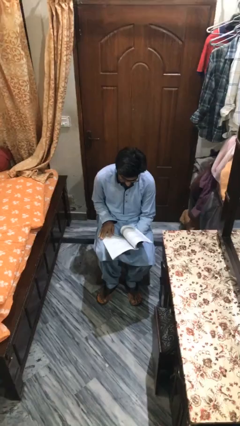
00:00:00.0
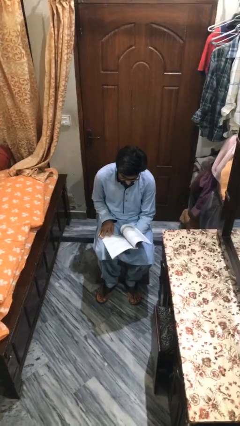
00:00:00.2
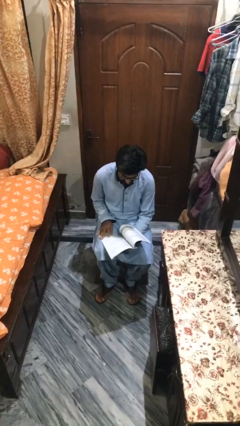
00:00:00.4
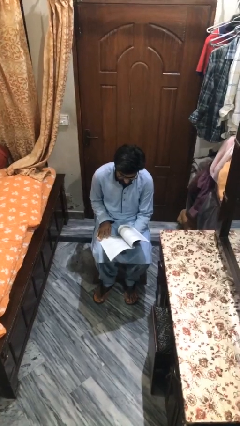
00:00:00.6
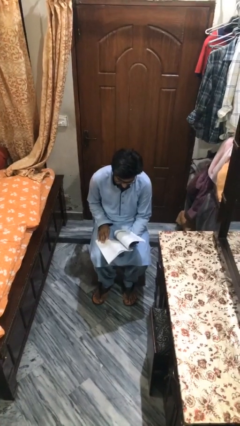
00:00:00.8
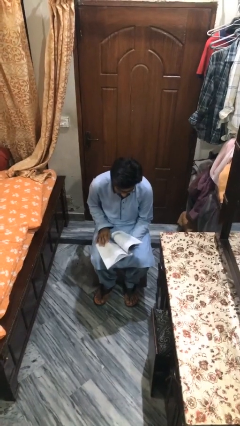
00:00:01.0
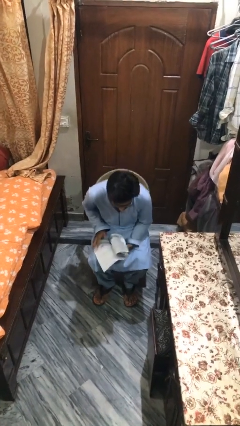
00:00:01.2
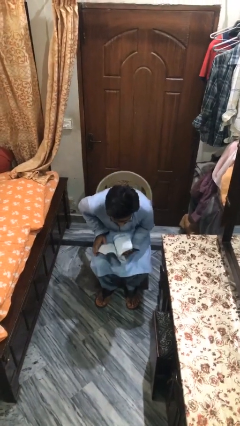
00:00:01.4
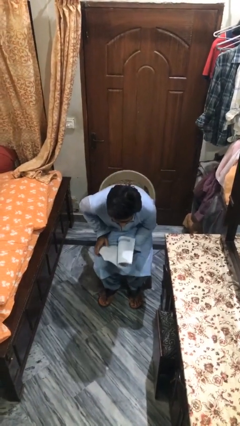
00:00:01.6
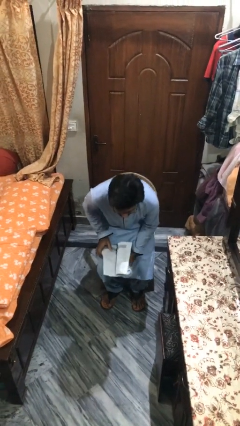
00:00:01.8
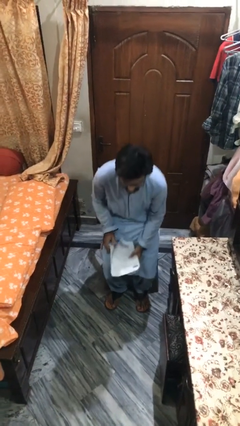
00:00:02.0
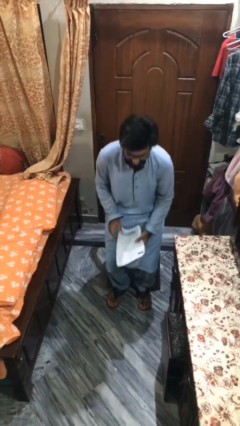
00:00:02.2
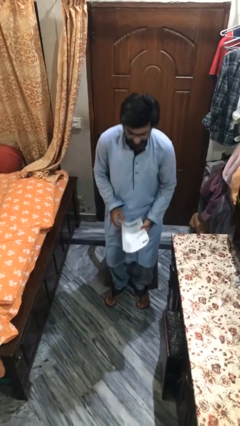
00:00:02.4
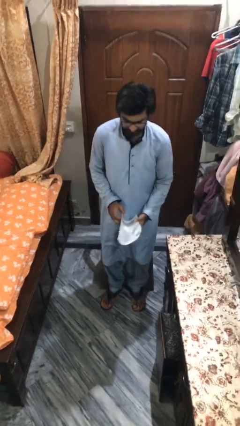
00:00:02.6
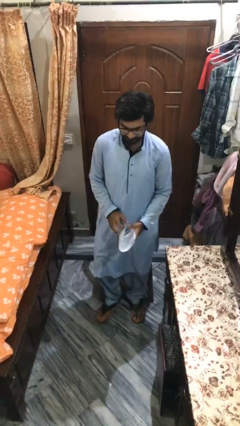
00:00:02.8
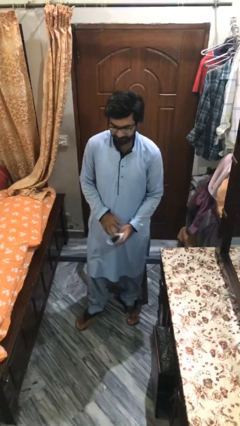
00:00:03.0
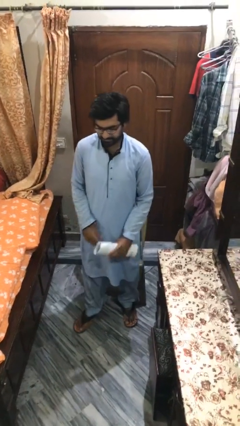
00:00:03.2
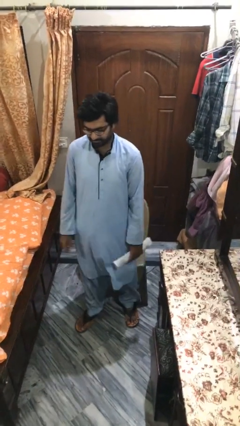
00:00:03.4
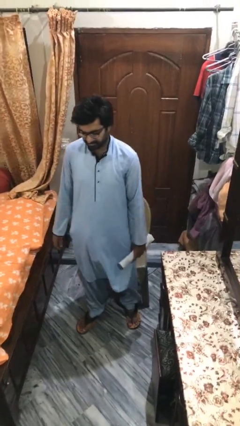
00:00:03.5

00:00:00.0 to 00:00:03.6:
person stands up

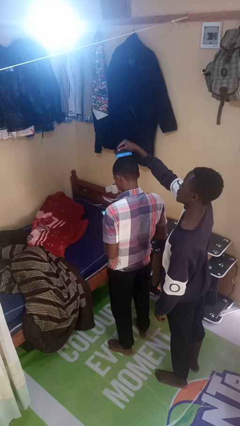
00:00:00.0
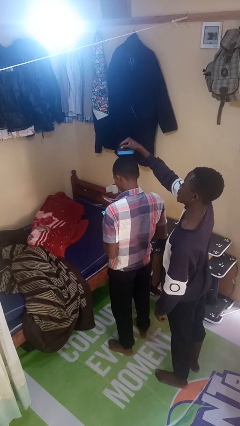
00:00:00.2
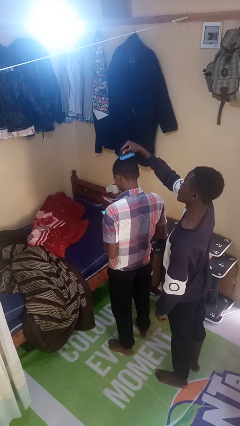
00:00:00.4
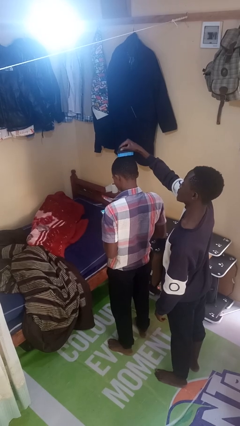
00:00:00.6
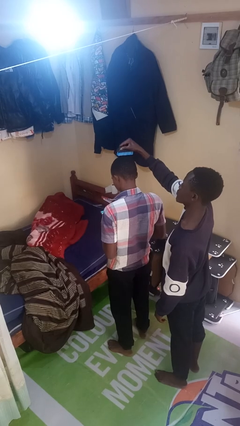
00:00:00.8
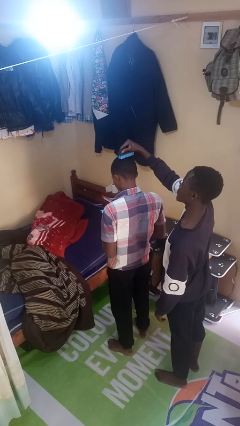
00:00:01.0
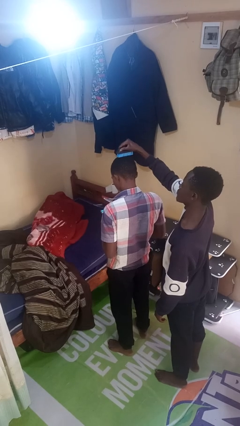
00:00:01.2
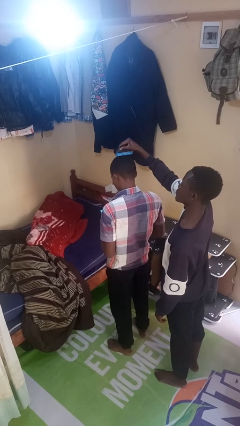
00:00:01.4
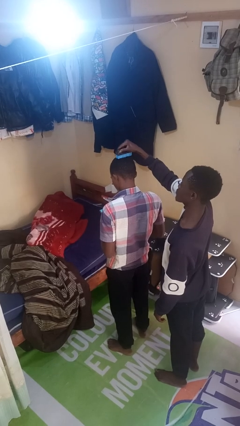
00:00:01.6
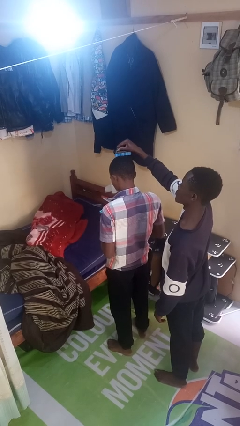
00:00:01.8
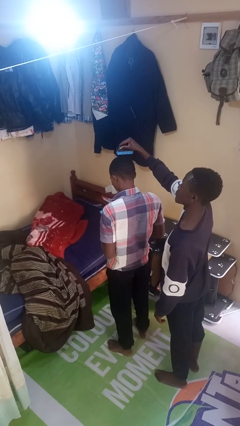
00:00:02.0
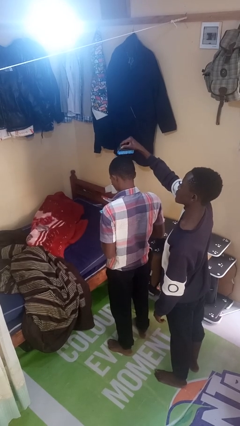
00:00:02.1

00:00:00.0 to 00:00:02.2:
person brushes hair of person

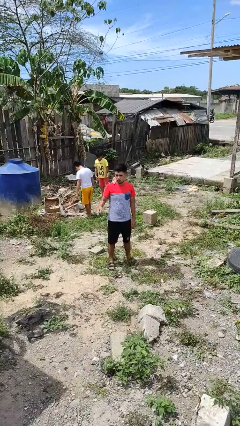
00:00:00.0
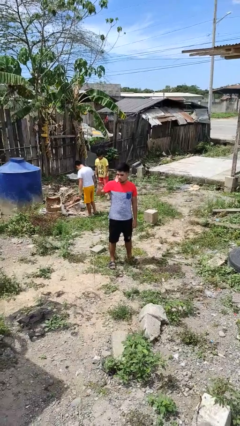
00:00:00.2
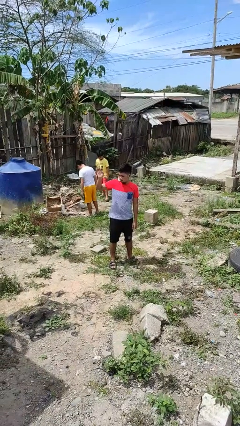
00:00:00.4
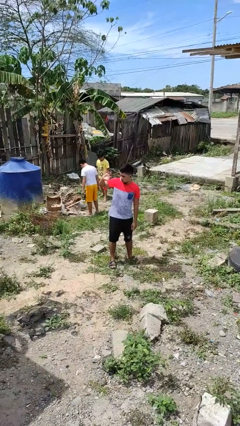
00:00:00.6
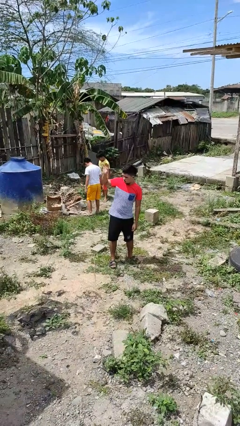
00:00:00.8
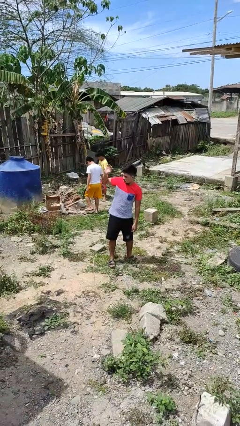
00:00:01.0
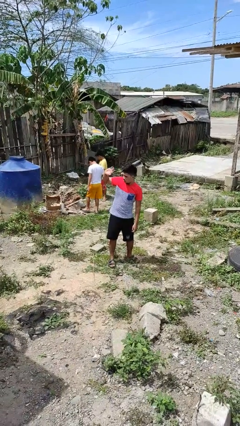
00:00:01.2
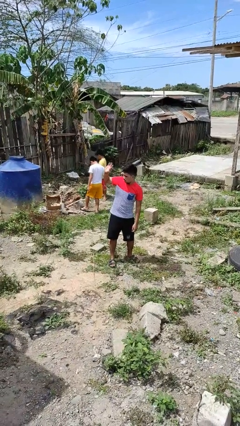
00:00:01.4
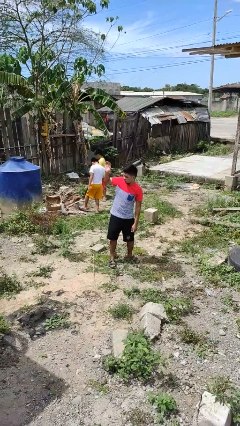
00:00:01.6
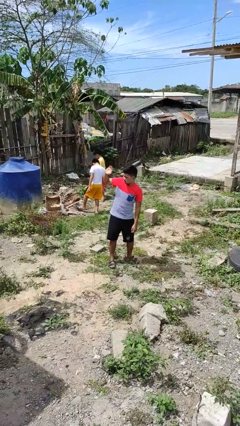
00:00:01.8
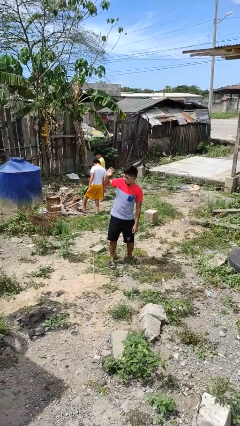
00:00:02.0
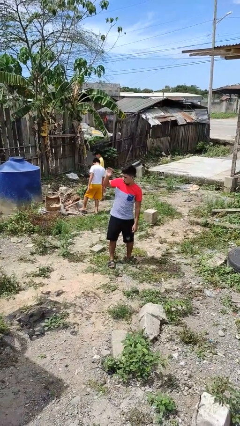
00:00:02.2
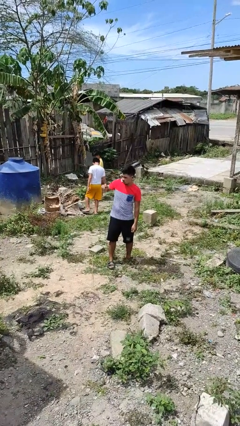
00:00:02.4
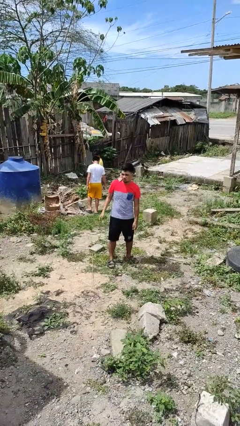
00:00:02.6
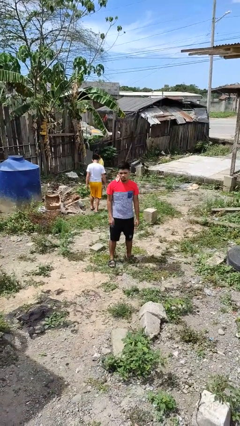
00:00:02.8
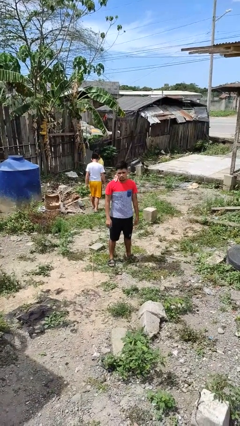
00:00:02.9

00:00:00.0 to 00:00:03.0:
person waves at person

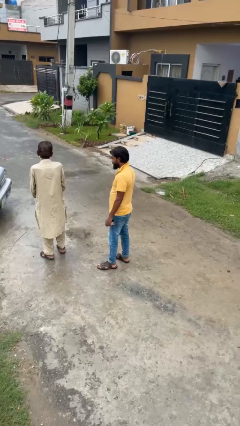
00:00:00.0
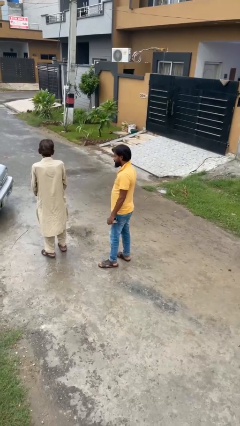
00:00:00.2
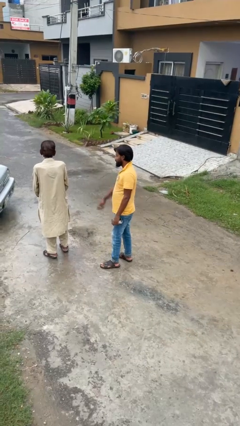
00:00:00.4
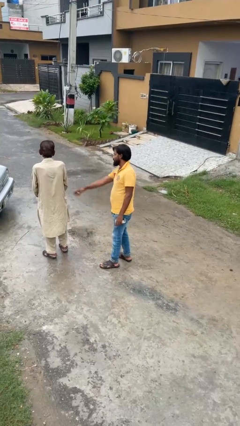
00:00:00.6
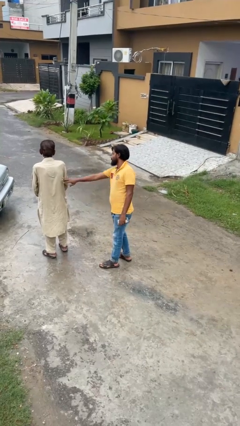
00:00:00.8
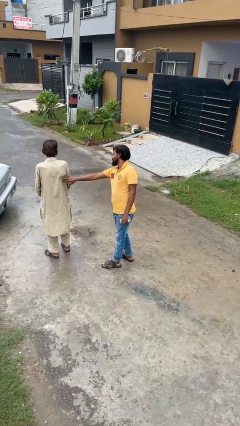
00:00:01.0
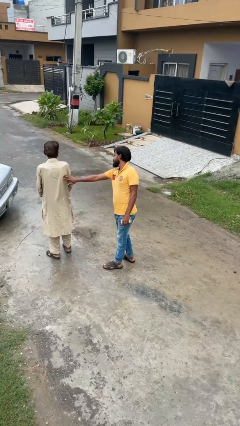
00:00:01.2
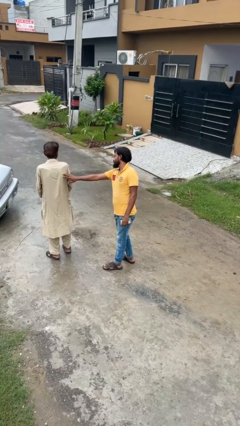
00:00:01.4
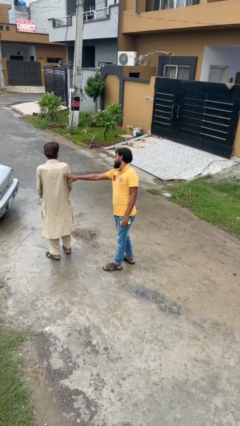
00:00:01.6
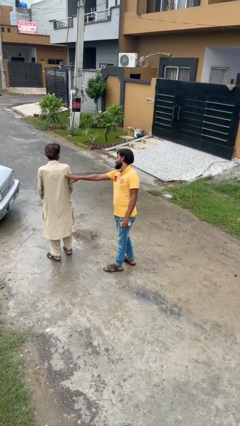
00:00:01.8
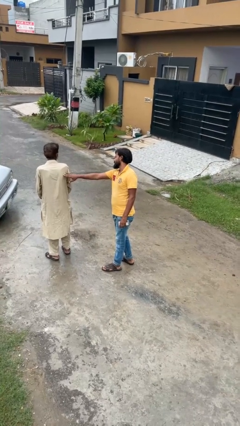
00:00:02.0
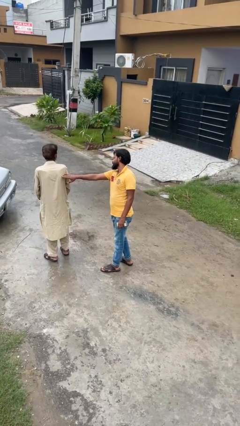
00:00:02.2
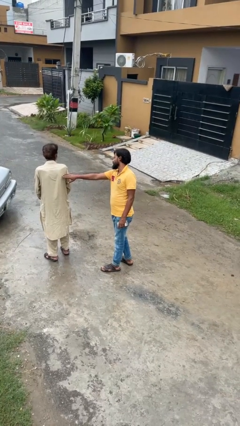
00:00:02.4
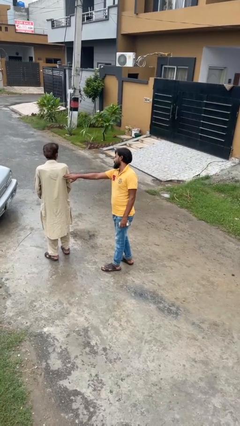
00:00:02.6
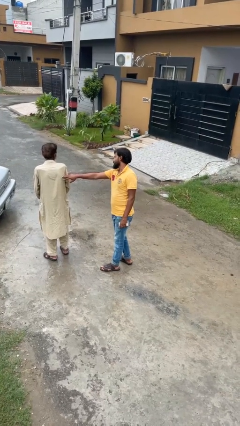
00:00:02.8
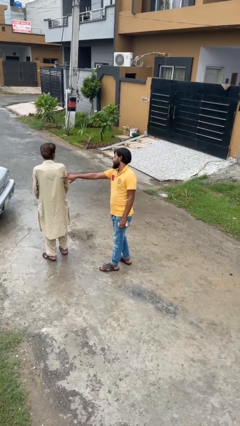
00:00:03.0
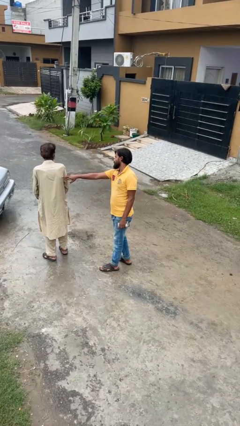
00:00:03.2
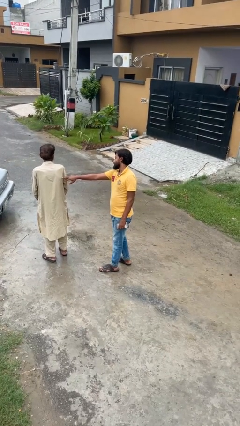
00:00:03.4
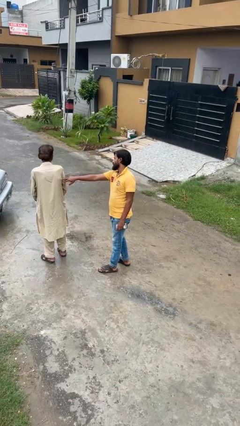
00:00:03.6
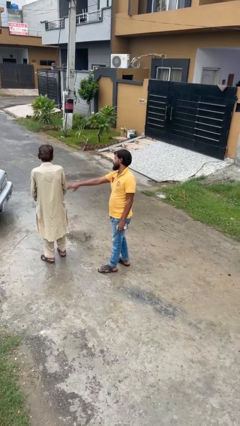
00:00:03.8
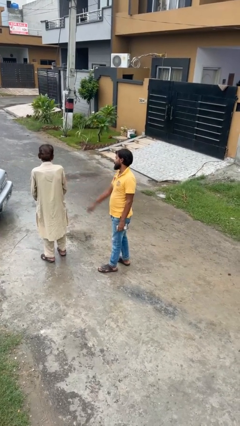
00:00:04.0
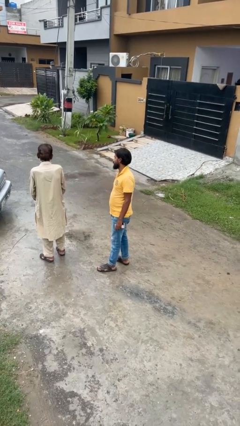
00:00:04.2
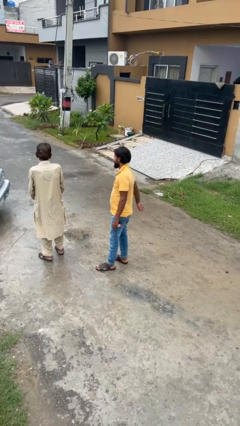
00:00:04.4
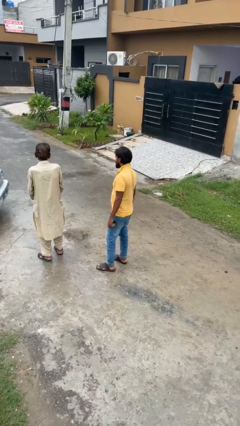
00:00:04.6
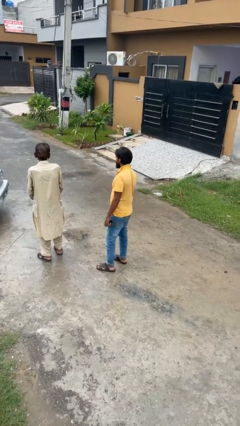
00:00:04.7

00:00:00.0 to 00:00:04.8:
person touches back of person

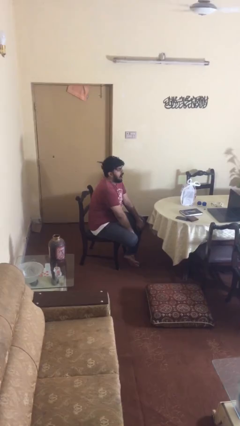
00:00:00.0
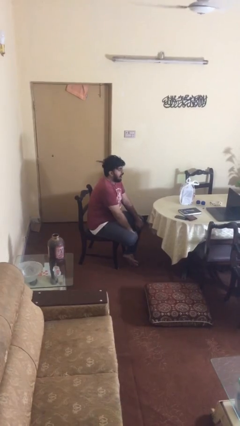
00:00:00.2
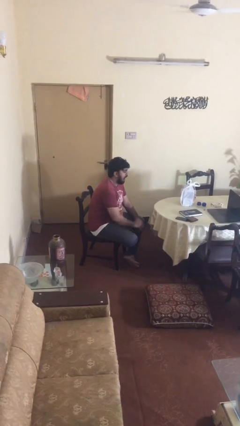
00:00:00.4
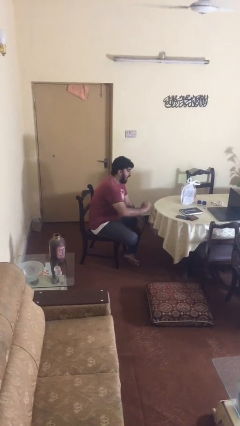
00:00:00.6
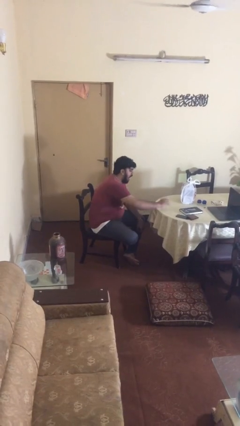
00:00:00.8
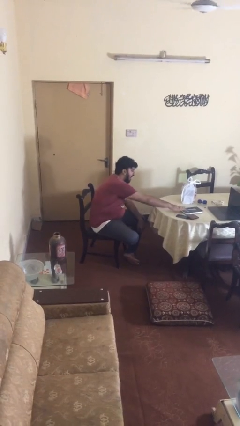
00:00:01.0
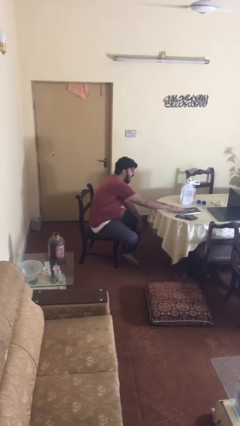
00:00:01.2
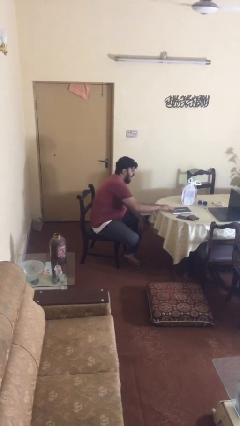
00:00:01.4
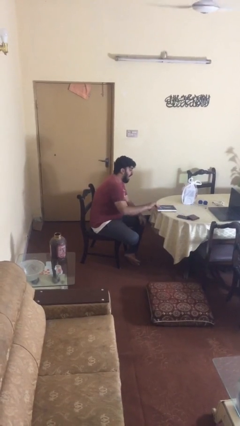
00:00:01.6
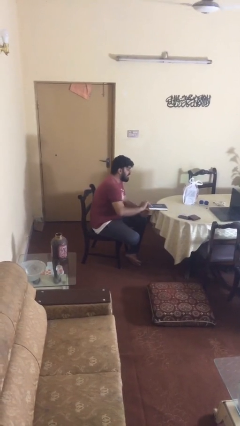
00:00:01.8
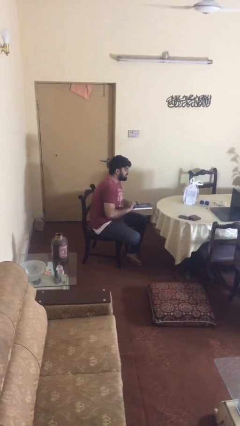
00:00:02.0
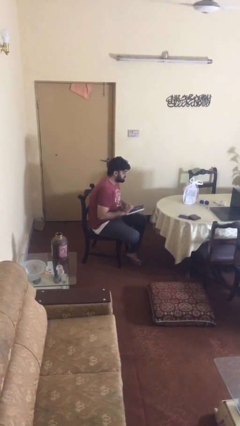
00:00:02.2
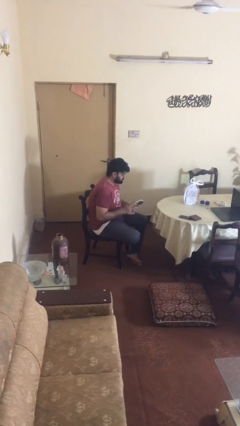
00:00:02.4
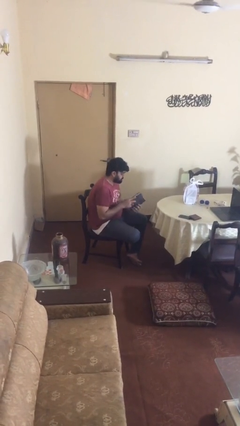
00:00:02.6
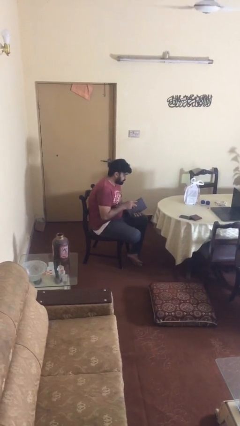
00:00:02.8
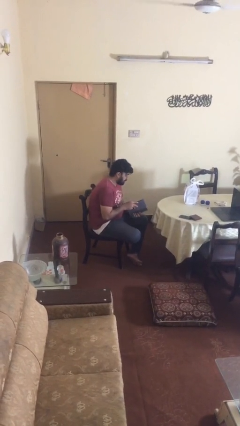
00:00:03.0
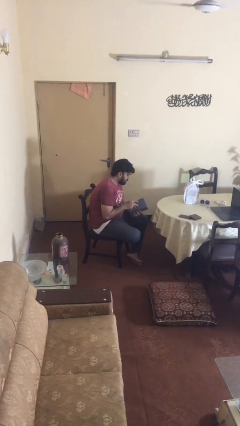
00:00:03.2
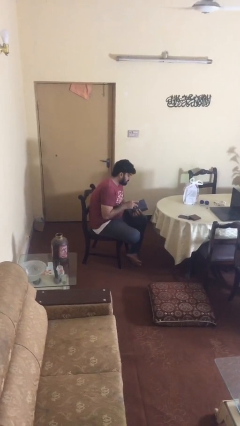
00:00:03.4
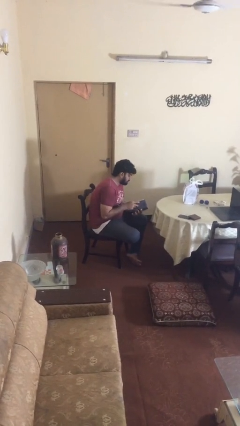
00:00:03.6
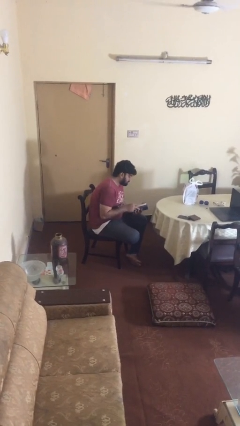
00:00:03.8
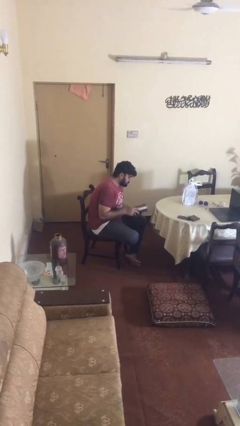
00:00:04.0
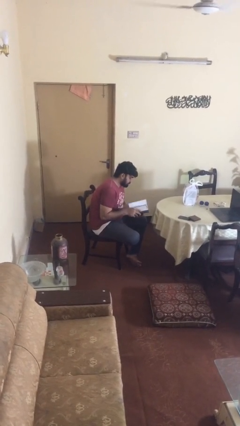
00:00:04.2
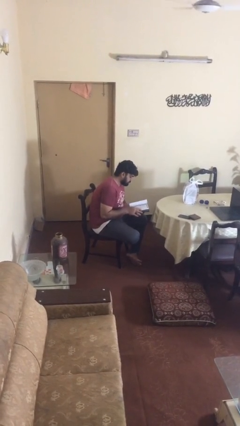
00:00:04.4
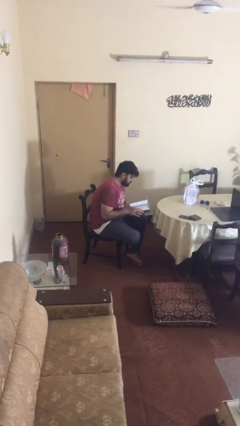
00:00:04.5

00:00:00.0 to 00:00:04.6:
person picks up object from table
